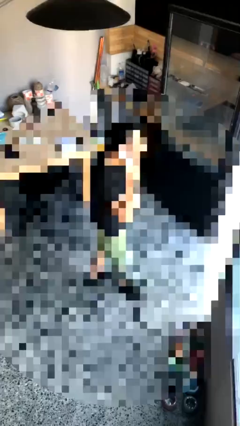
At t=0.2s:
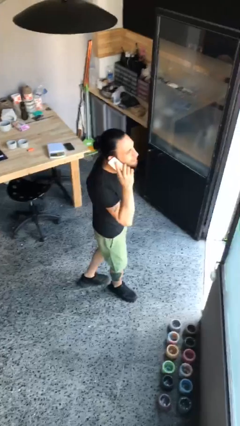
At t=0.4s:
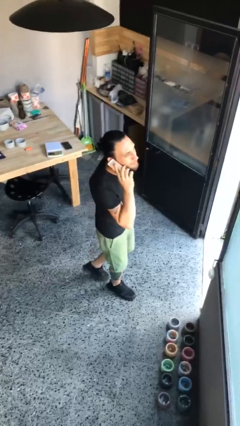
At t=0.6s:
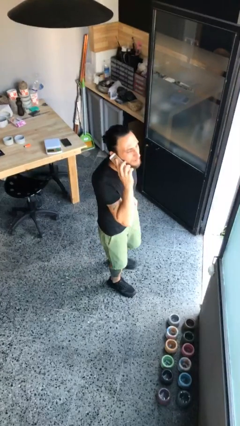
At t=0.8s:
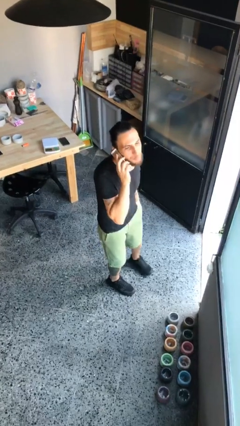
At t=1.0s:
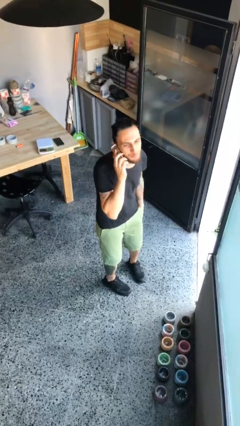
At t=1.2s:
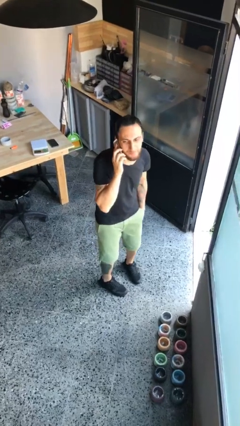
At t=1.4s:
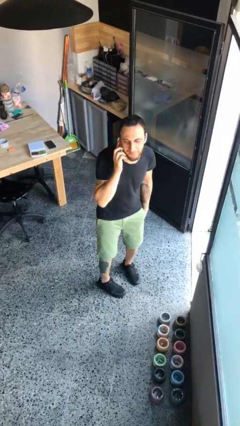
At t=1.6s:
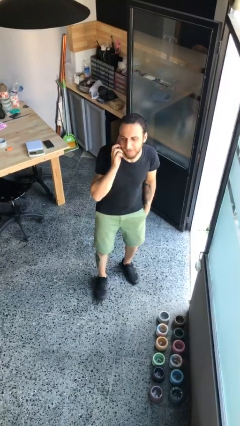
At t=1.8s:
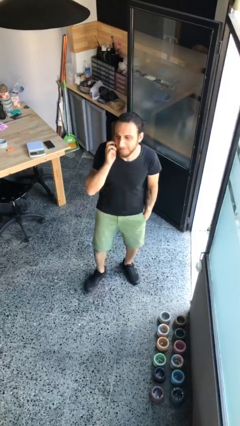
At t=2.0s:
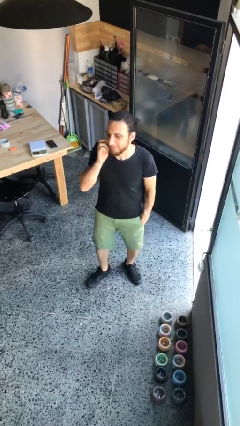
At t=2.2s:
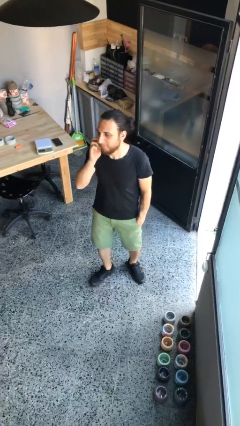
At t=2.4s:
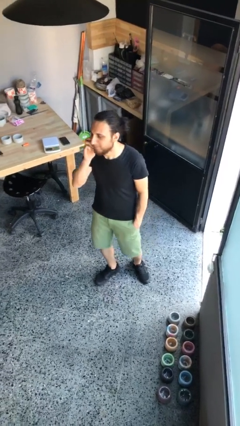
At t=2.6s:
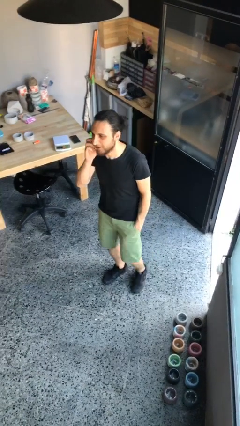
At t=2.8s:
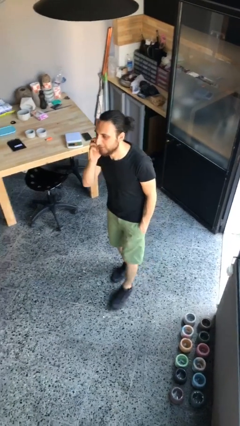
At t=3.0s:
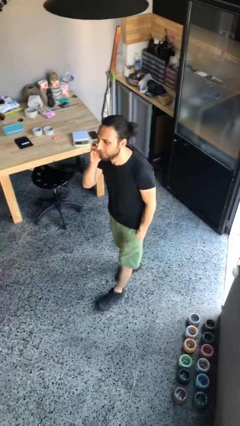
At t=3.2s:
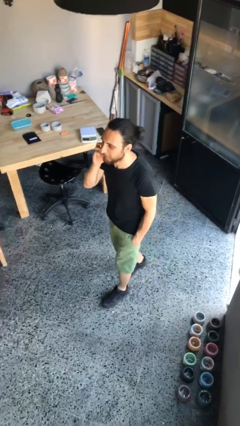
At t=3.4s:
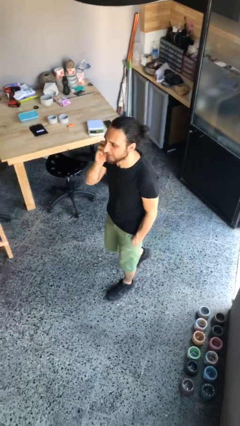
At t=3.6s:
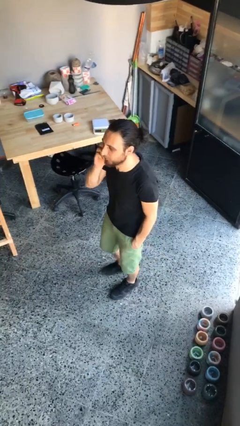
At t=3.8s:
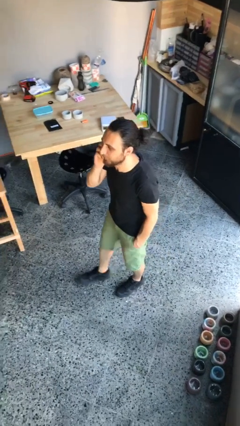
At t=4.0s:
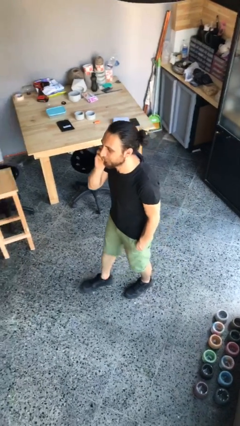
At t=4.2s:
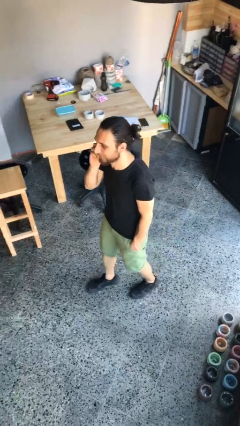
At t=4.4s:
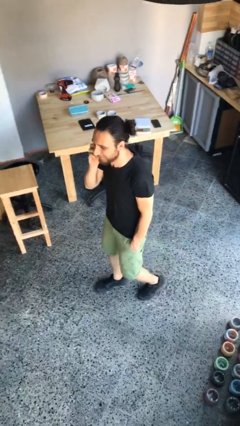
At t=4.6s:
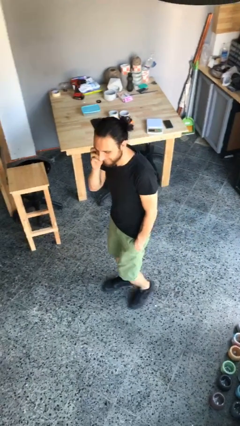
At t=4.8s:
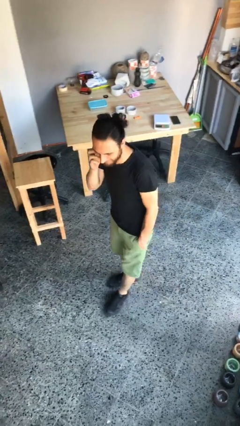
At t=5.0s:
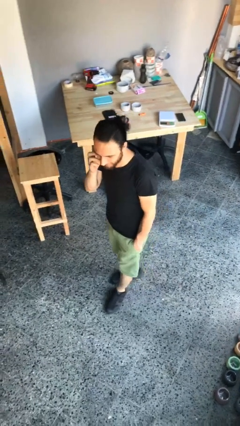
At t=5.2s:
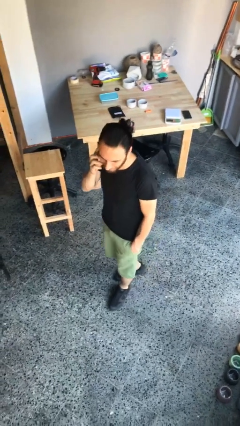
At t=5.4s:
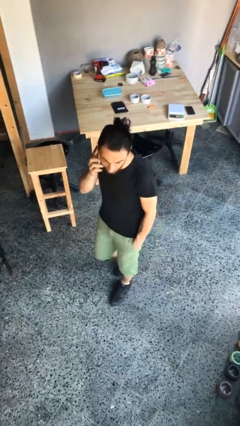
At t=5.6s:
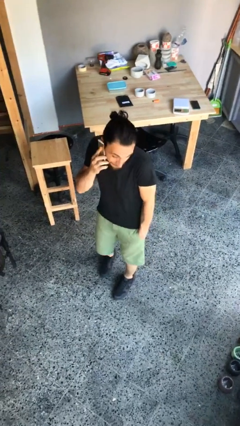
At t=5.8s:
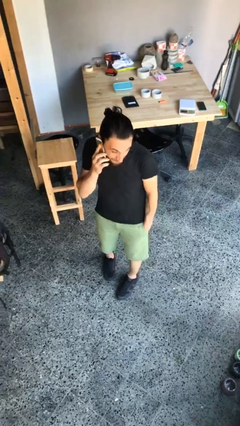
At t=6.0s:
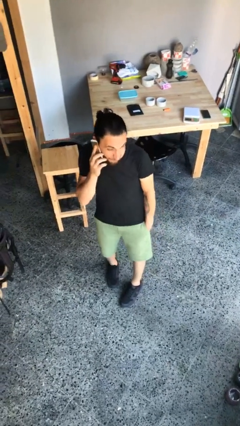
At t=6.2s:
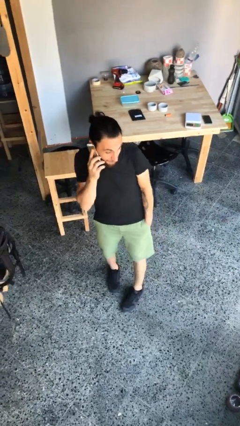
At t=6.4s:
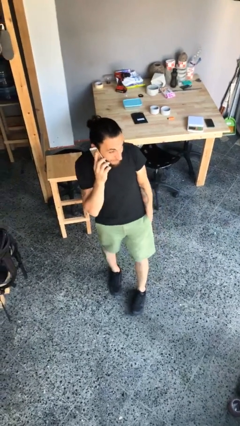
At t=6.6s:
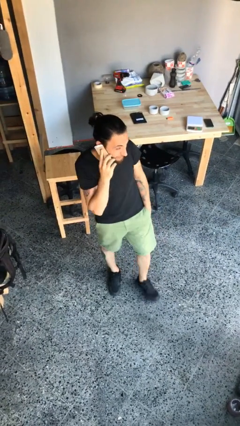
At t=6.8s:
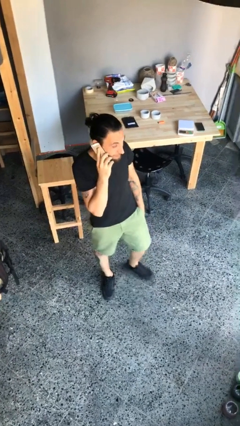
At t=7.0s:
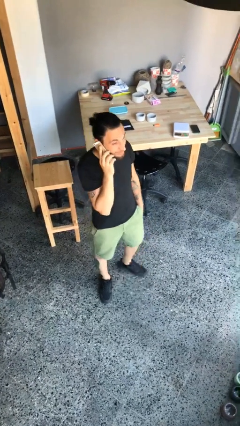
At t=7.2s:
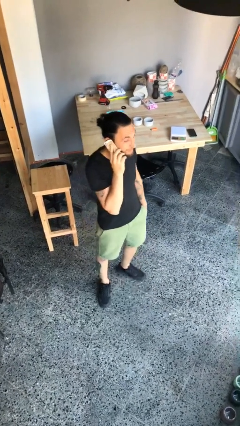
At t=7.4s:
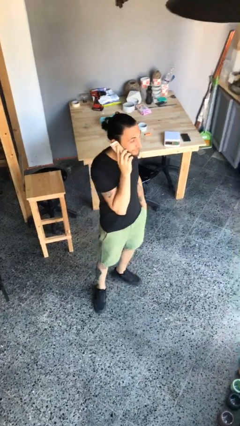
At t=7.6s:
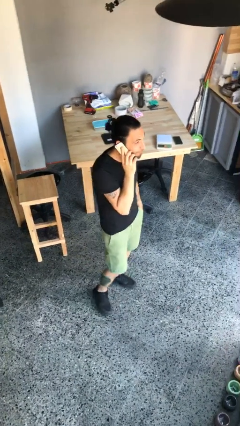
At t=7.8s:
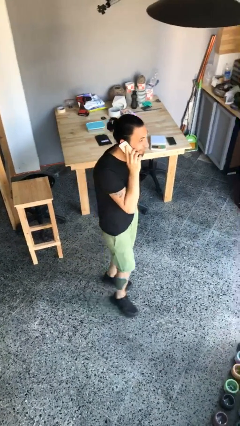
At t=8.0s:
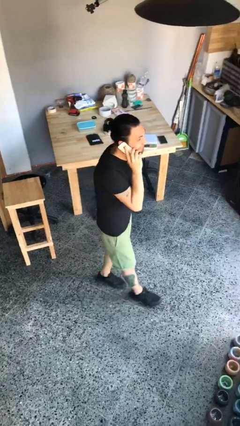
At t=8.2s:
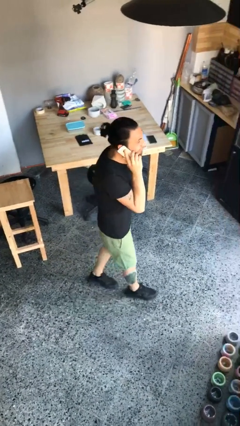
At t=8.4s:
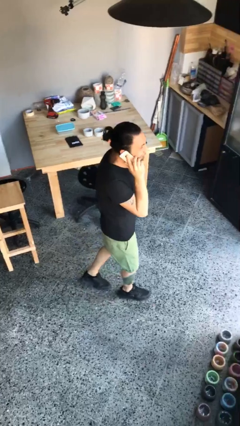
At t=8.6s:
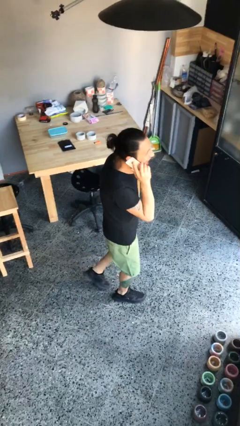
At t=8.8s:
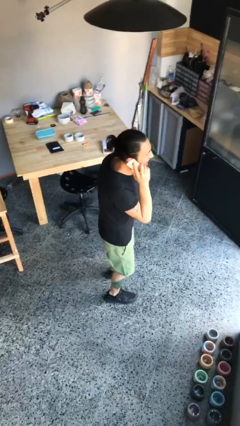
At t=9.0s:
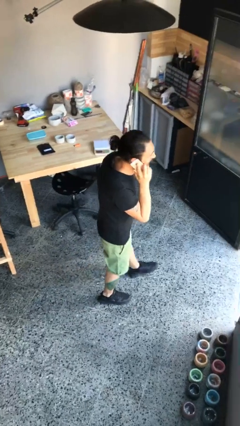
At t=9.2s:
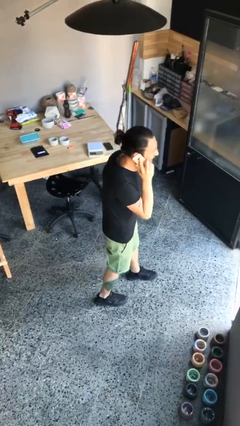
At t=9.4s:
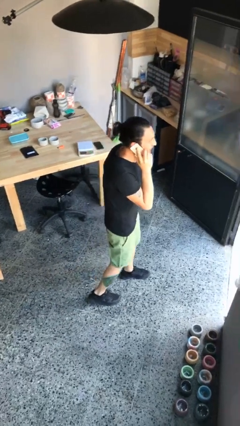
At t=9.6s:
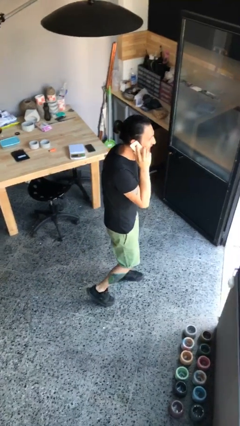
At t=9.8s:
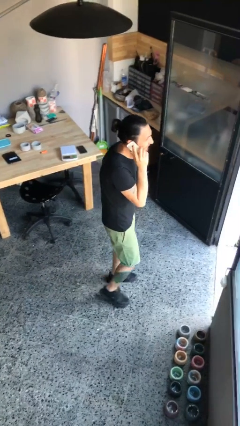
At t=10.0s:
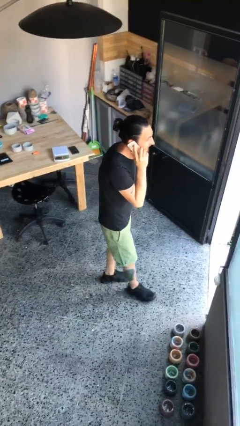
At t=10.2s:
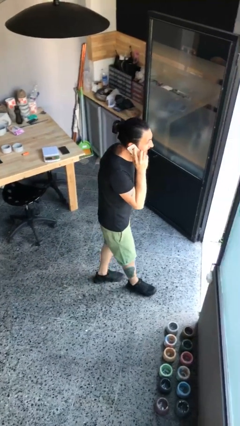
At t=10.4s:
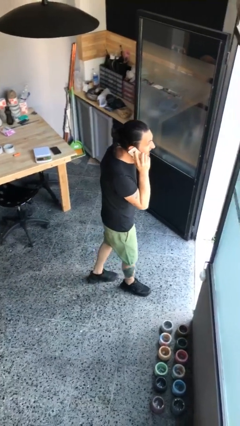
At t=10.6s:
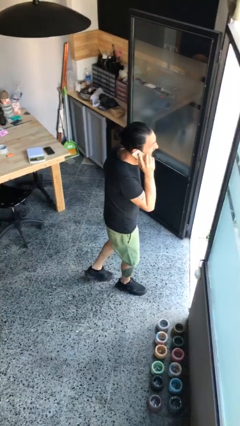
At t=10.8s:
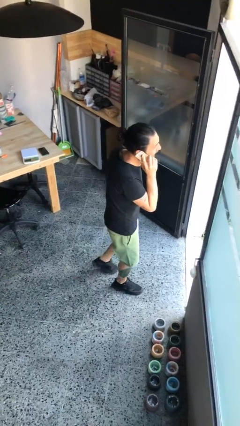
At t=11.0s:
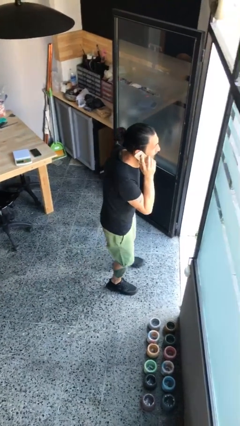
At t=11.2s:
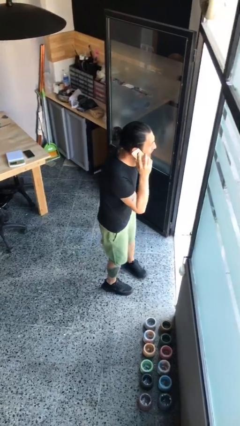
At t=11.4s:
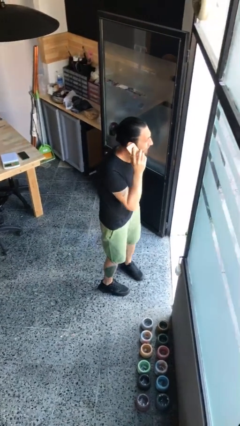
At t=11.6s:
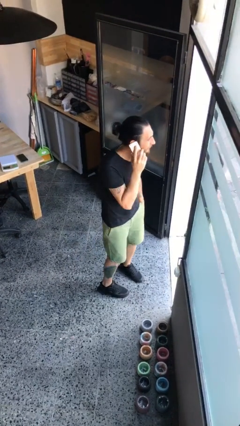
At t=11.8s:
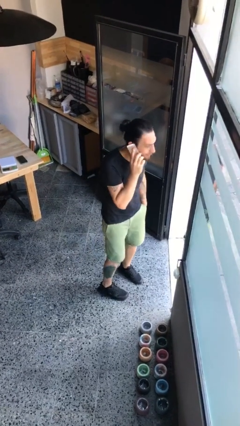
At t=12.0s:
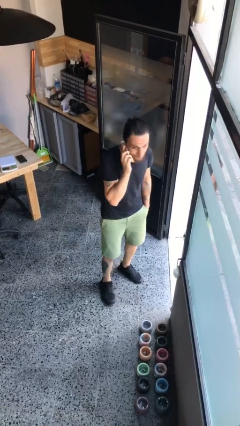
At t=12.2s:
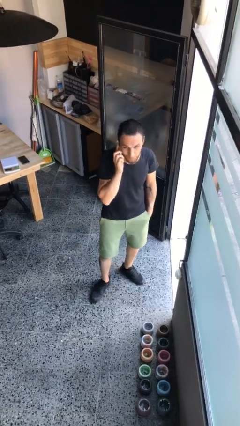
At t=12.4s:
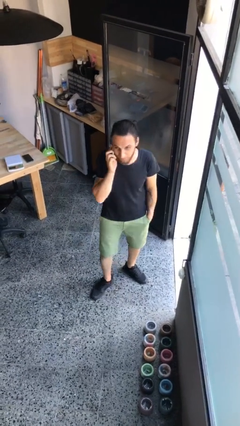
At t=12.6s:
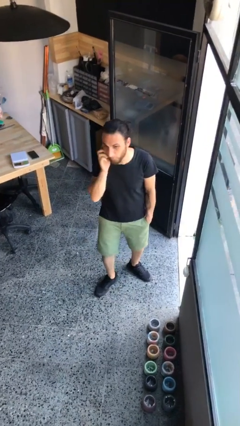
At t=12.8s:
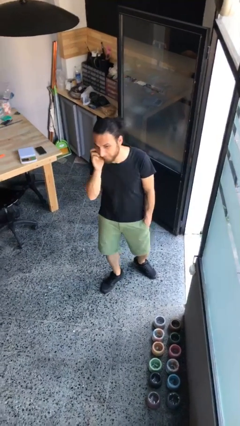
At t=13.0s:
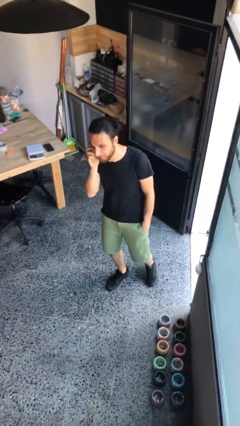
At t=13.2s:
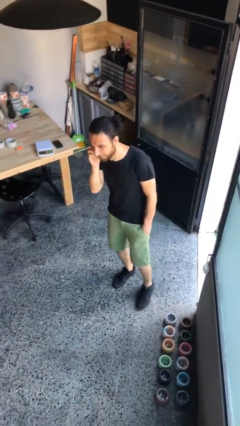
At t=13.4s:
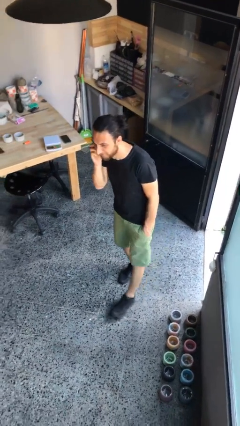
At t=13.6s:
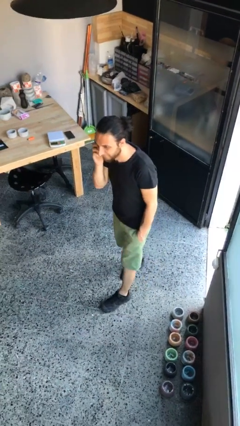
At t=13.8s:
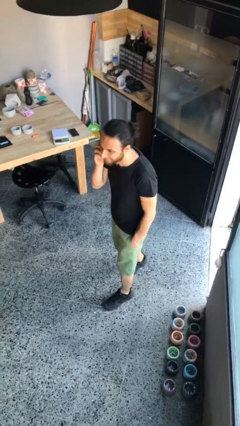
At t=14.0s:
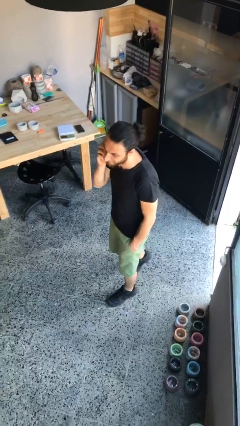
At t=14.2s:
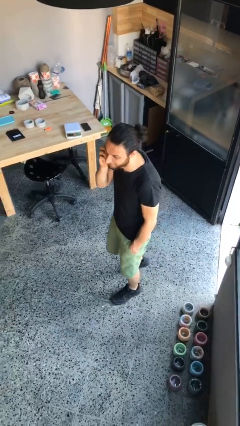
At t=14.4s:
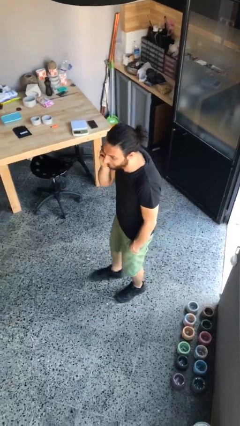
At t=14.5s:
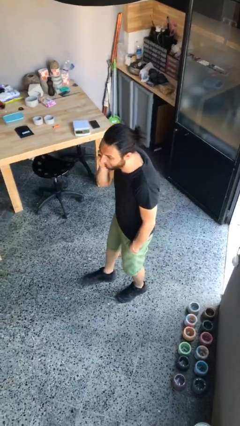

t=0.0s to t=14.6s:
person talks on phone

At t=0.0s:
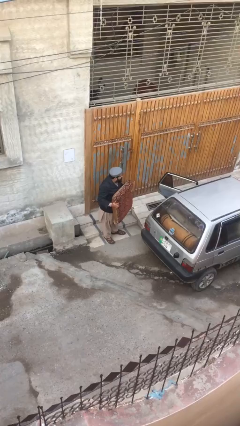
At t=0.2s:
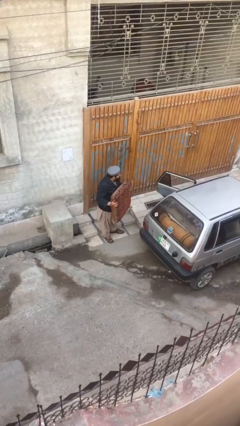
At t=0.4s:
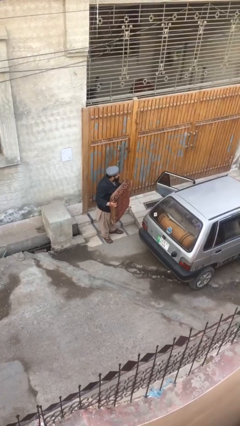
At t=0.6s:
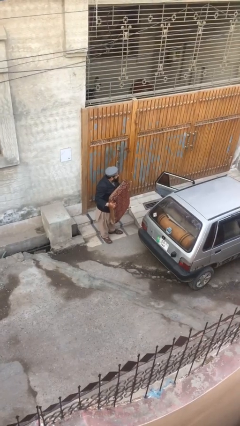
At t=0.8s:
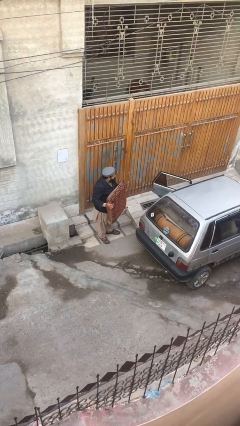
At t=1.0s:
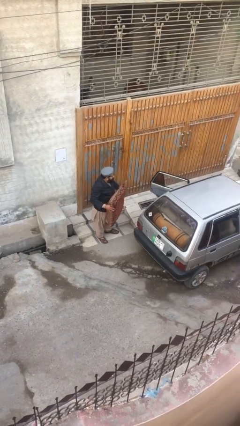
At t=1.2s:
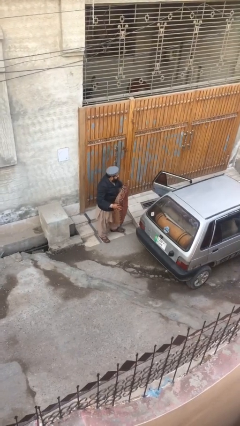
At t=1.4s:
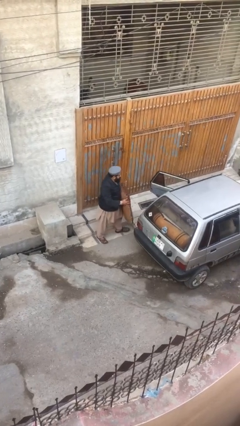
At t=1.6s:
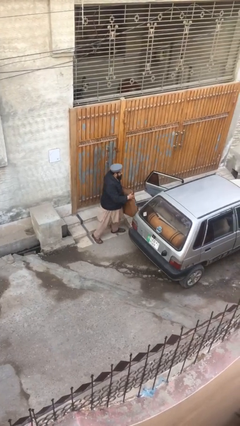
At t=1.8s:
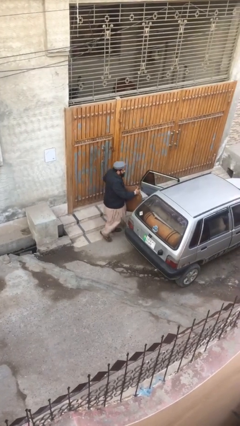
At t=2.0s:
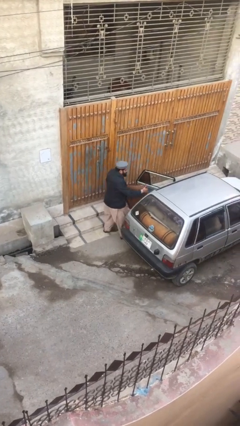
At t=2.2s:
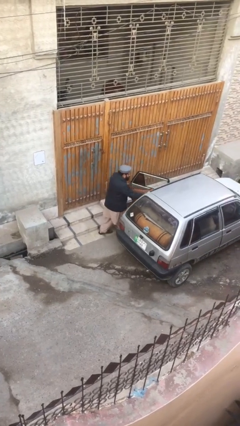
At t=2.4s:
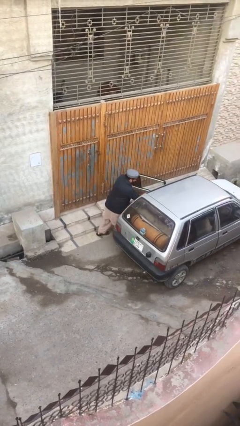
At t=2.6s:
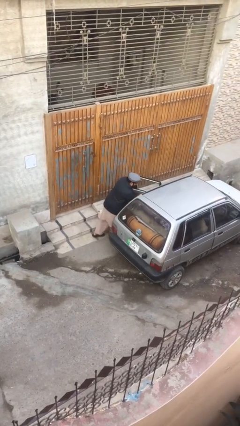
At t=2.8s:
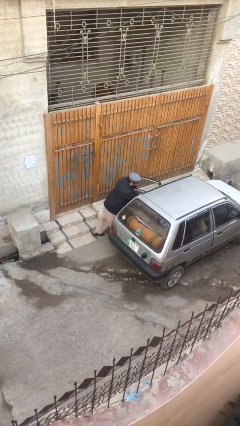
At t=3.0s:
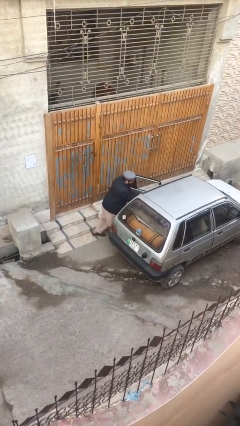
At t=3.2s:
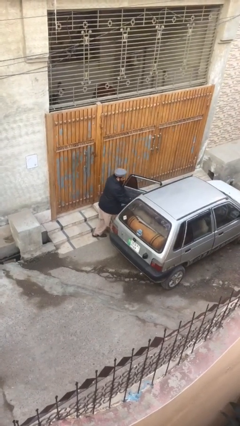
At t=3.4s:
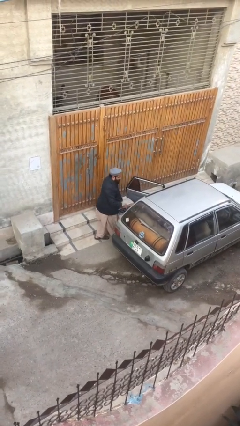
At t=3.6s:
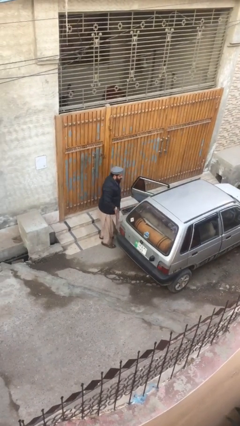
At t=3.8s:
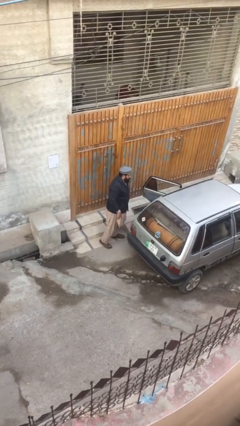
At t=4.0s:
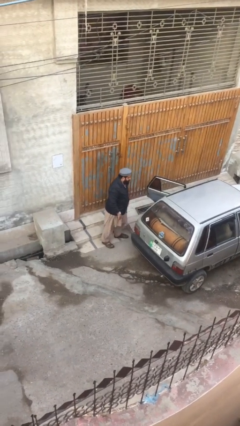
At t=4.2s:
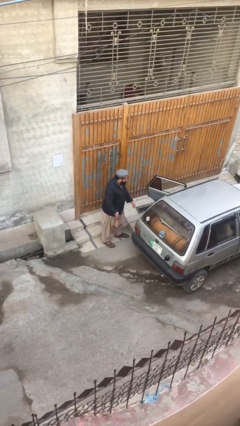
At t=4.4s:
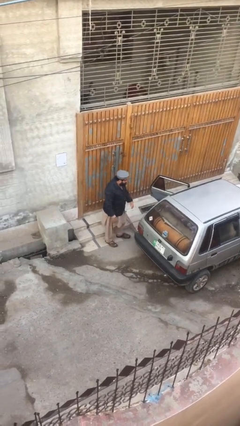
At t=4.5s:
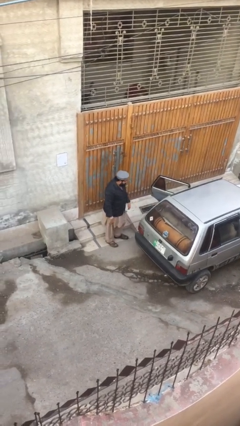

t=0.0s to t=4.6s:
person loads car
